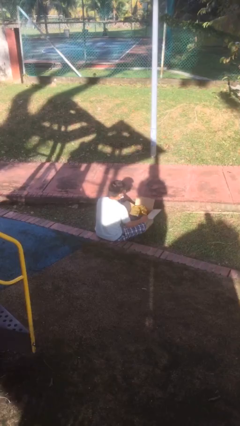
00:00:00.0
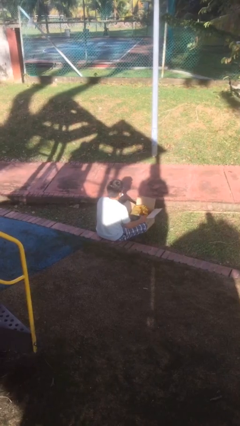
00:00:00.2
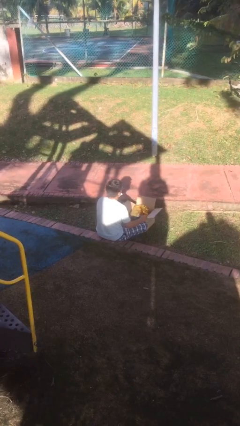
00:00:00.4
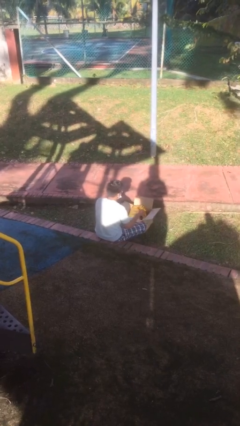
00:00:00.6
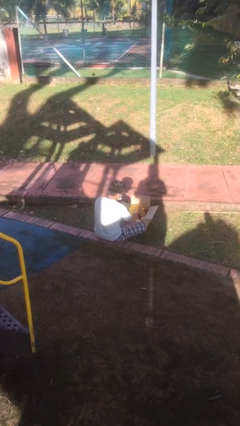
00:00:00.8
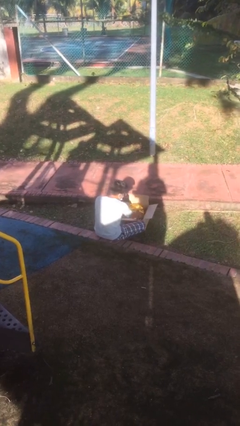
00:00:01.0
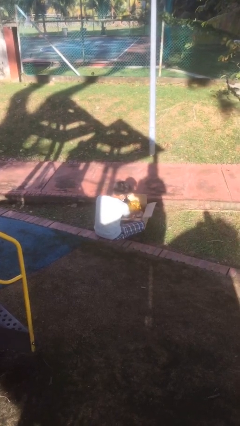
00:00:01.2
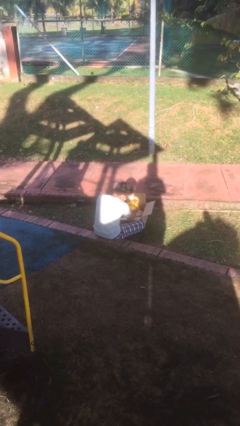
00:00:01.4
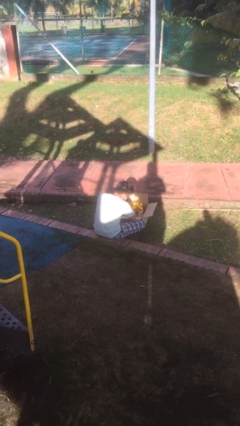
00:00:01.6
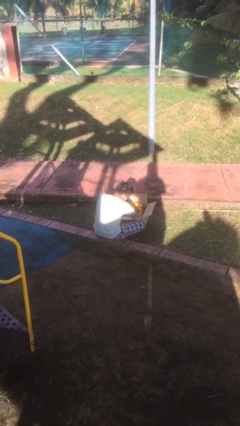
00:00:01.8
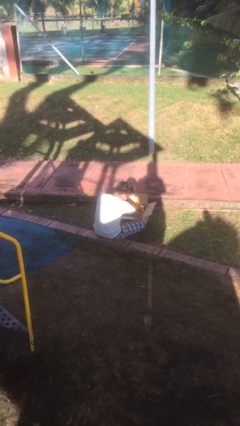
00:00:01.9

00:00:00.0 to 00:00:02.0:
person searches in box

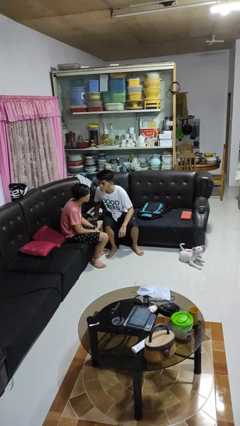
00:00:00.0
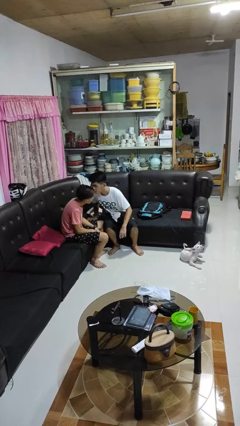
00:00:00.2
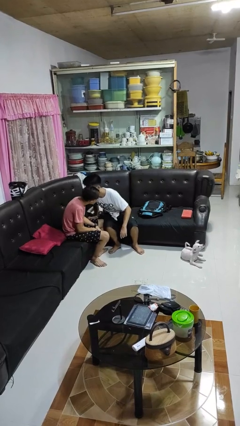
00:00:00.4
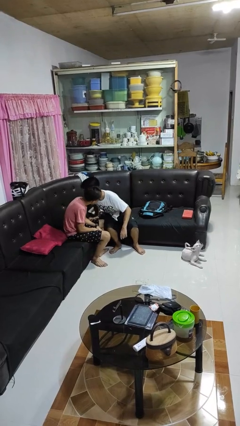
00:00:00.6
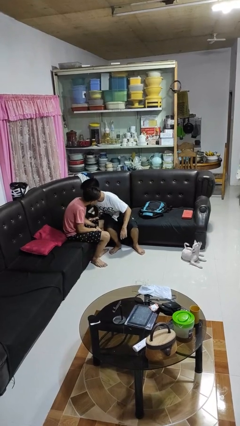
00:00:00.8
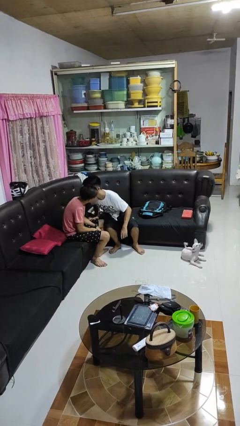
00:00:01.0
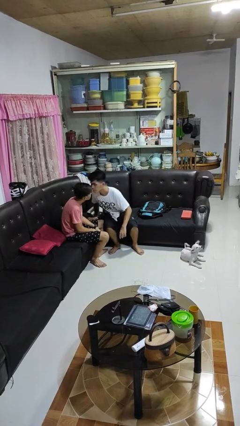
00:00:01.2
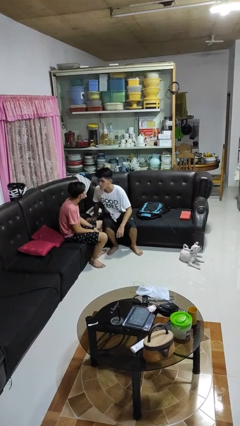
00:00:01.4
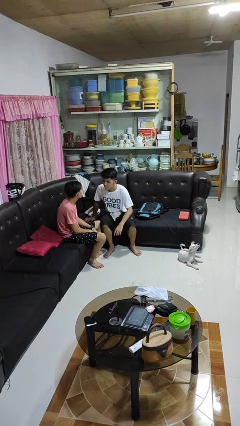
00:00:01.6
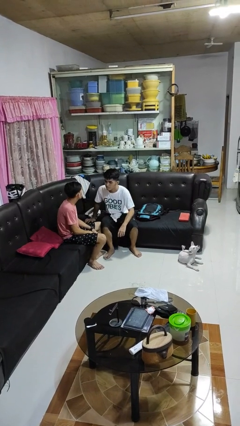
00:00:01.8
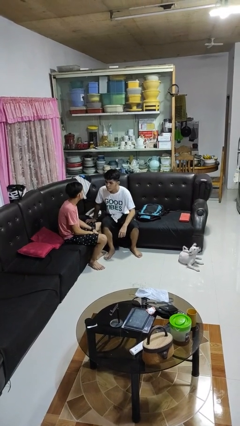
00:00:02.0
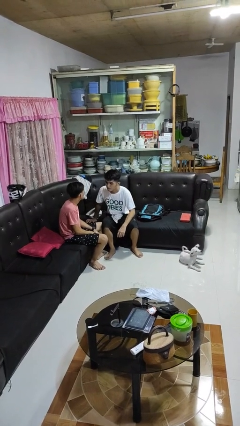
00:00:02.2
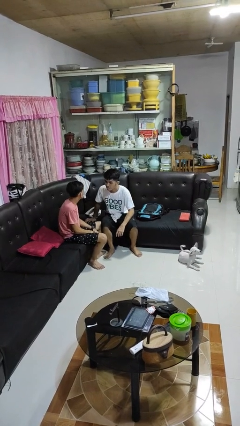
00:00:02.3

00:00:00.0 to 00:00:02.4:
person kisses cheek of person

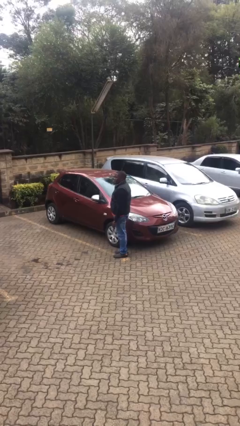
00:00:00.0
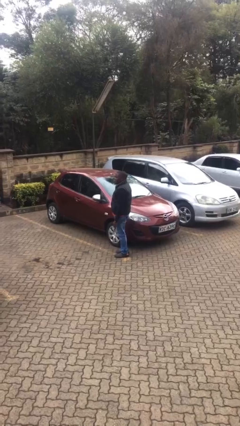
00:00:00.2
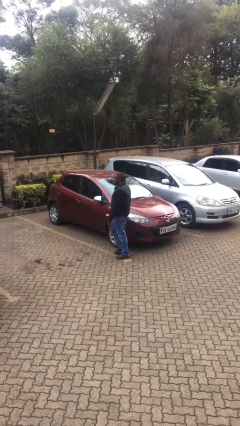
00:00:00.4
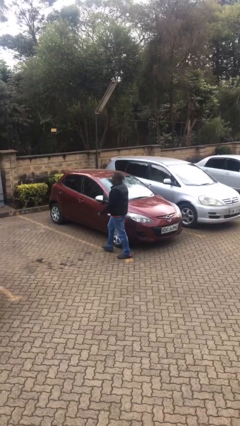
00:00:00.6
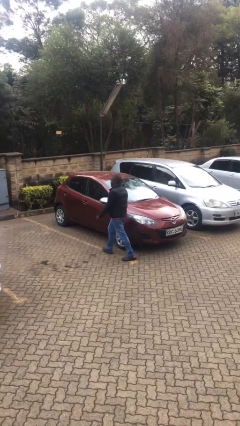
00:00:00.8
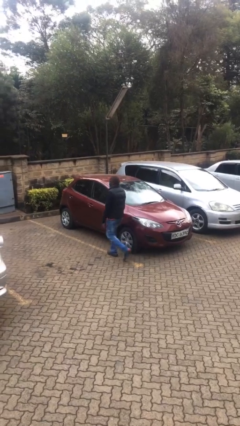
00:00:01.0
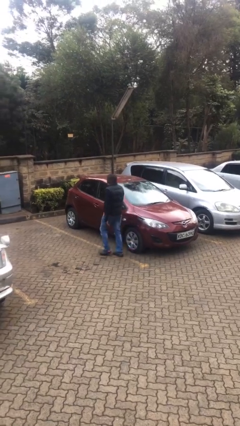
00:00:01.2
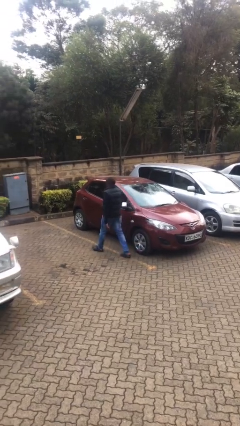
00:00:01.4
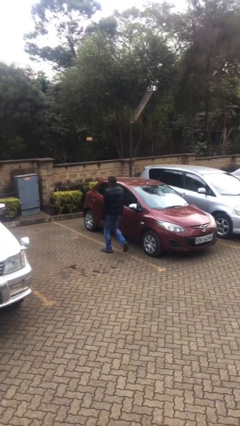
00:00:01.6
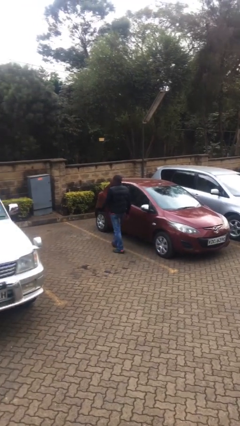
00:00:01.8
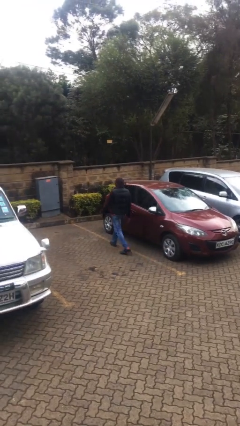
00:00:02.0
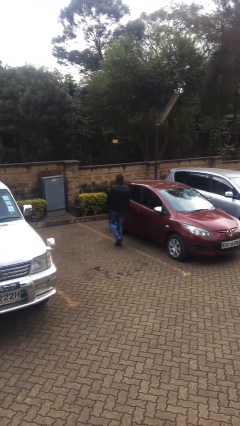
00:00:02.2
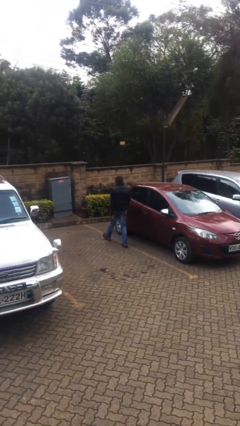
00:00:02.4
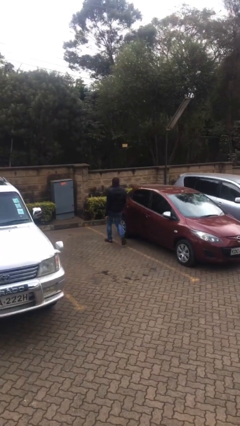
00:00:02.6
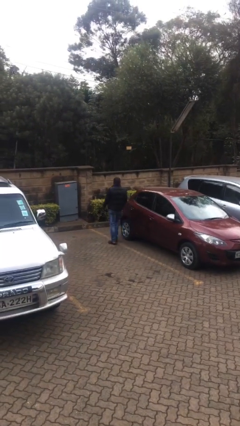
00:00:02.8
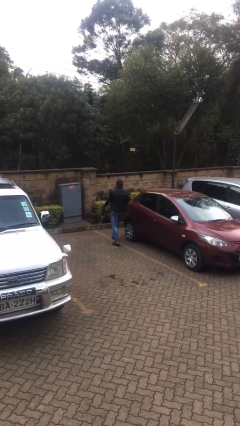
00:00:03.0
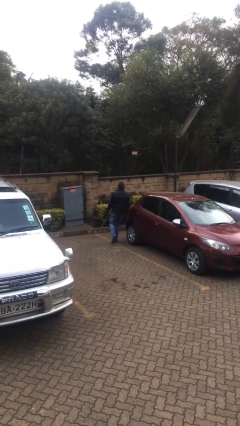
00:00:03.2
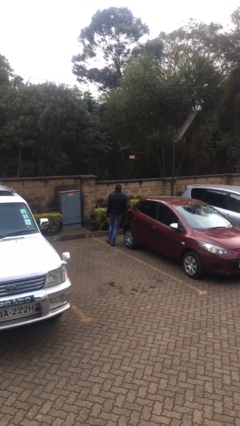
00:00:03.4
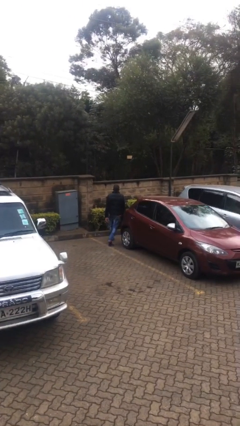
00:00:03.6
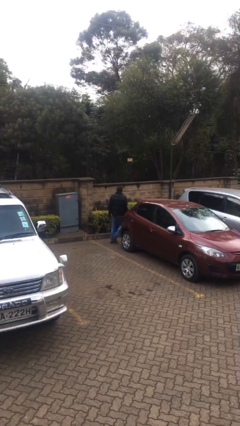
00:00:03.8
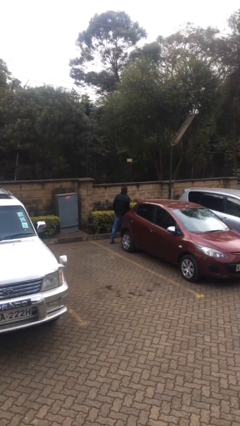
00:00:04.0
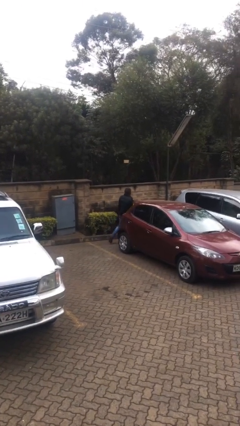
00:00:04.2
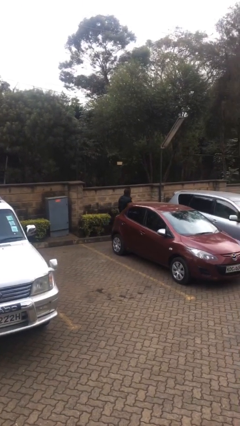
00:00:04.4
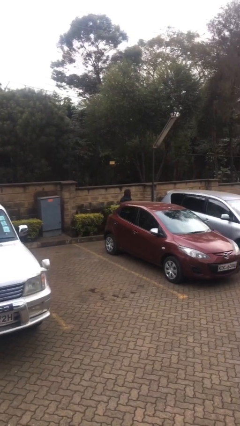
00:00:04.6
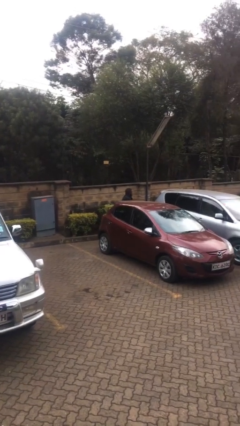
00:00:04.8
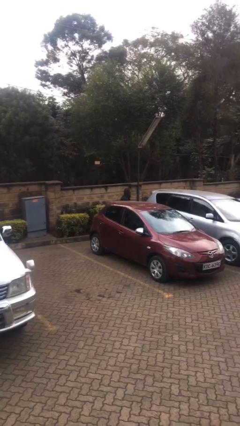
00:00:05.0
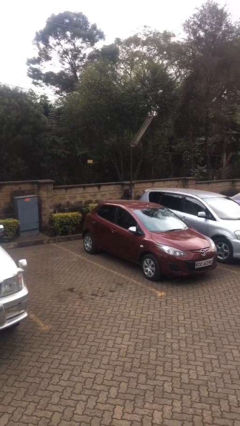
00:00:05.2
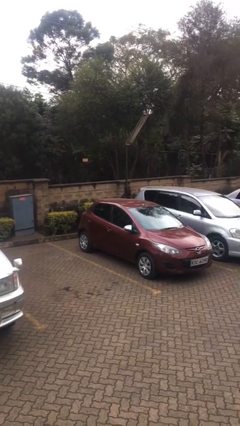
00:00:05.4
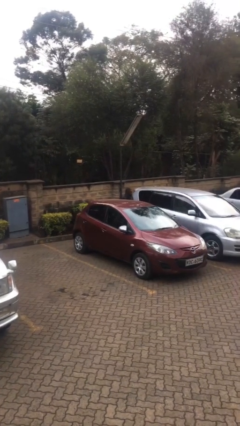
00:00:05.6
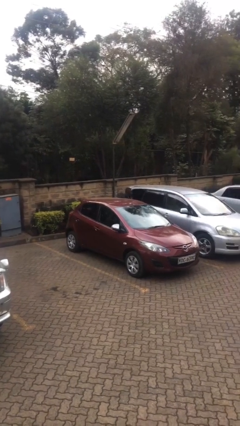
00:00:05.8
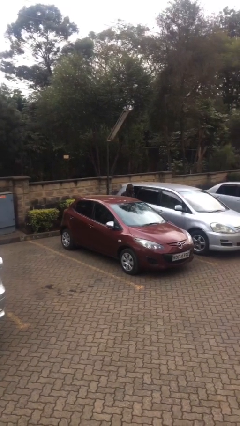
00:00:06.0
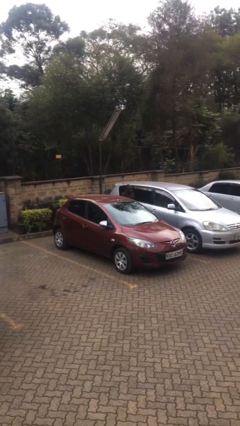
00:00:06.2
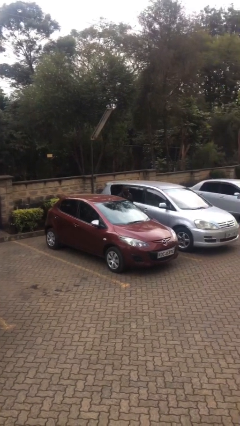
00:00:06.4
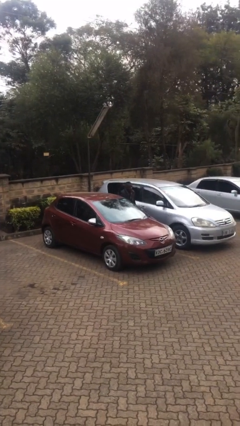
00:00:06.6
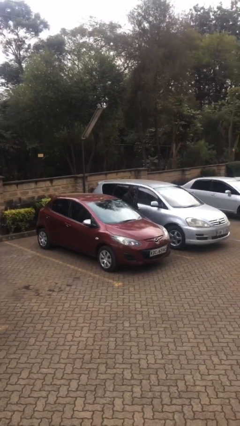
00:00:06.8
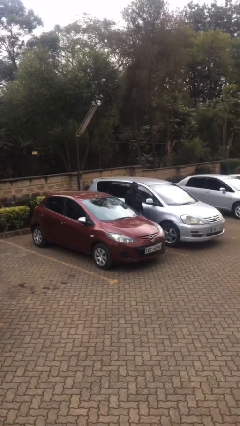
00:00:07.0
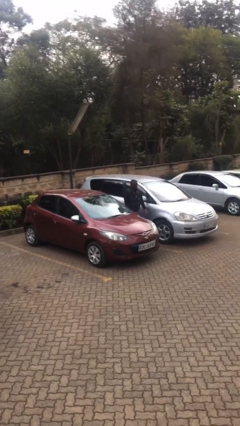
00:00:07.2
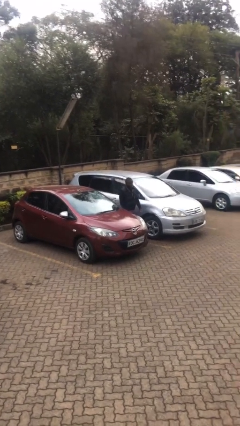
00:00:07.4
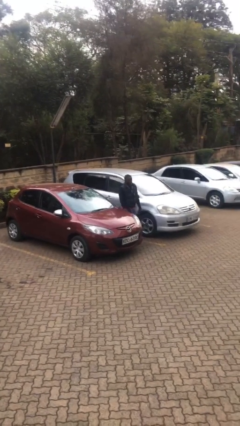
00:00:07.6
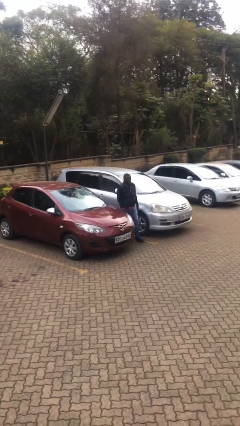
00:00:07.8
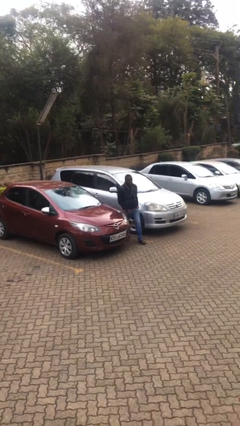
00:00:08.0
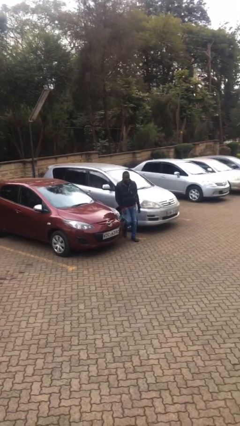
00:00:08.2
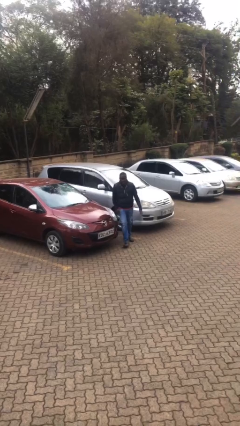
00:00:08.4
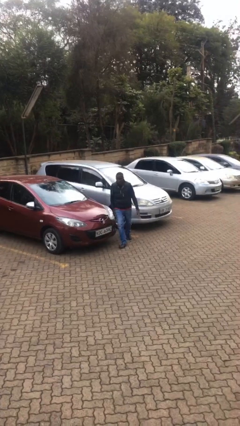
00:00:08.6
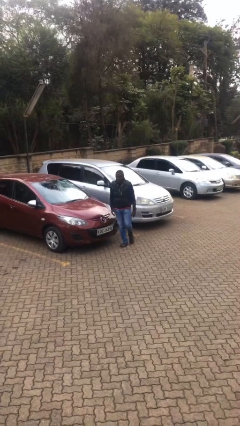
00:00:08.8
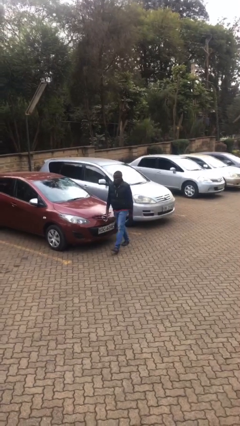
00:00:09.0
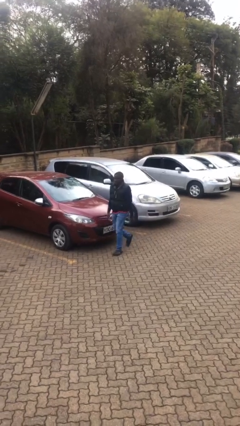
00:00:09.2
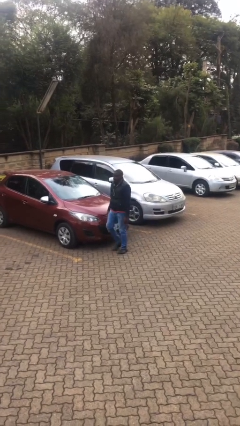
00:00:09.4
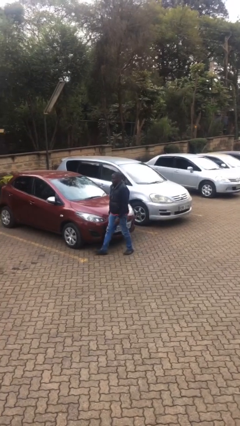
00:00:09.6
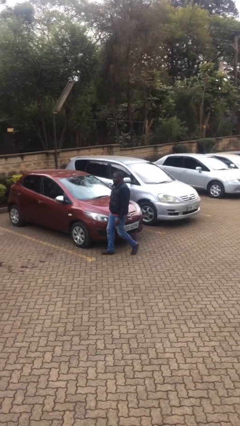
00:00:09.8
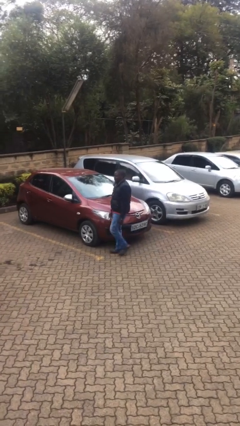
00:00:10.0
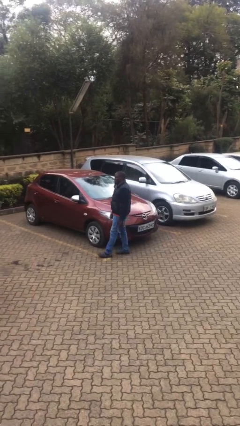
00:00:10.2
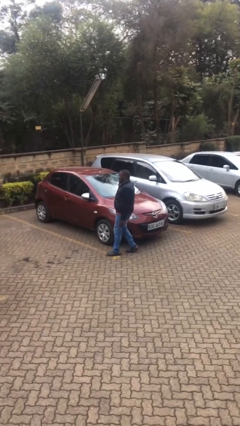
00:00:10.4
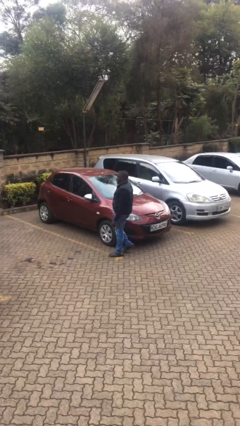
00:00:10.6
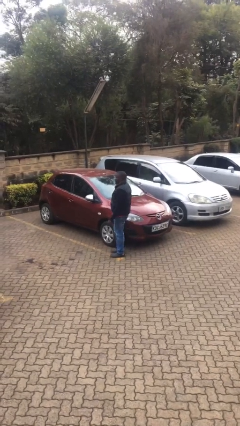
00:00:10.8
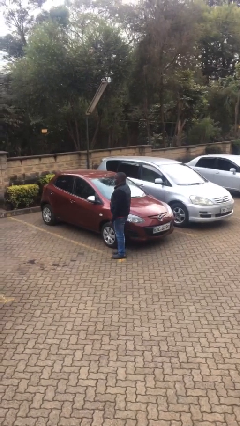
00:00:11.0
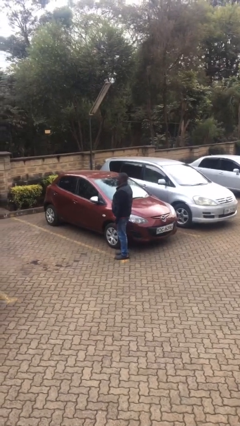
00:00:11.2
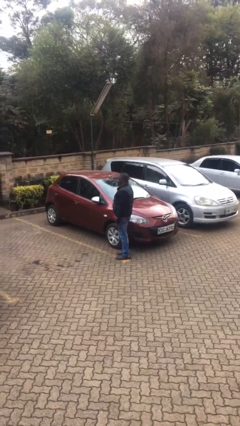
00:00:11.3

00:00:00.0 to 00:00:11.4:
person walks around car

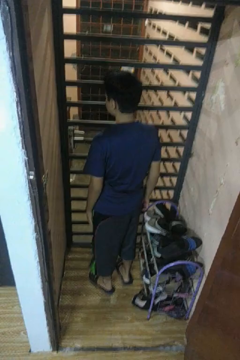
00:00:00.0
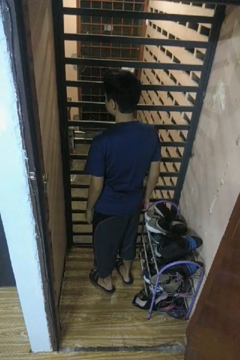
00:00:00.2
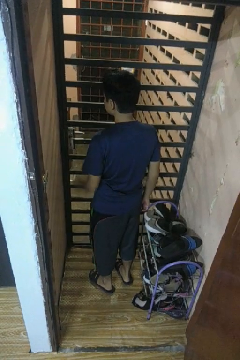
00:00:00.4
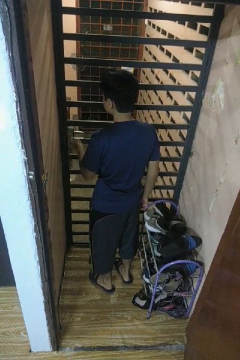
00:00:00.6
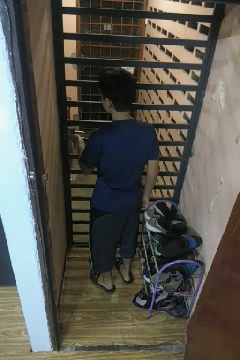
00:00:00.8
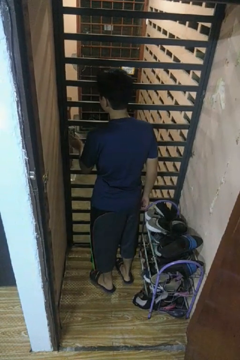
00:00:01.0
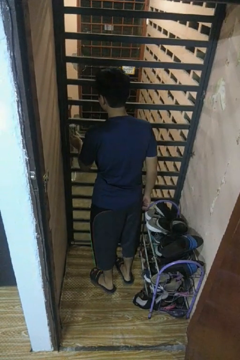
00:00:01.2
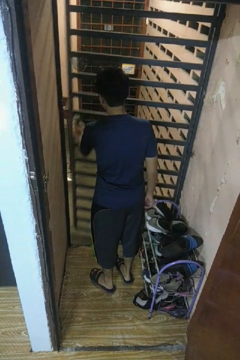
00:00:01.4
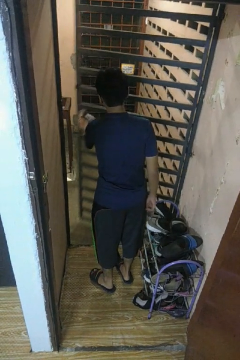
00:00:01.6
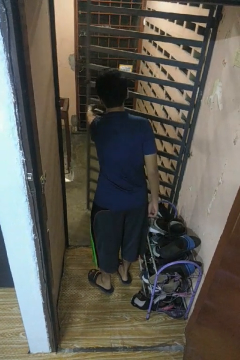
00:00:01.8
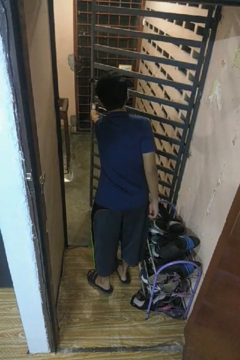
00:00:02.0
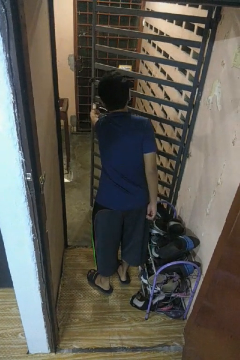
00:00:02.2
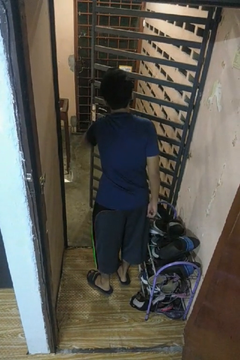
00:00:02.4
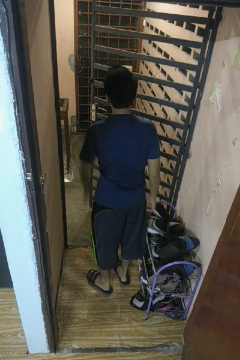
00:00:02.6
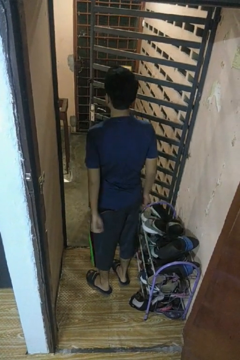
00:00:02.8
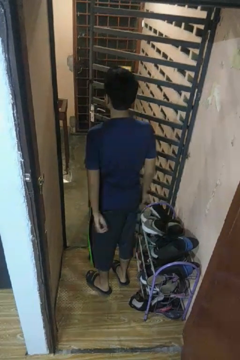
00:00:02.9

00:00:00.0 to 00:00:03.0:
person opens gate
